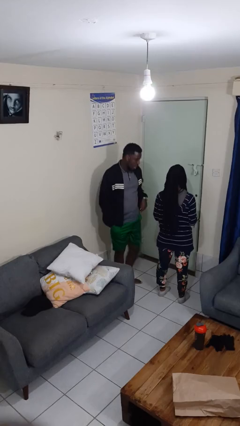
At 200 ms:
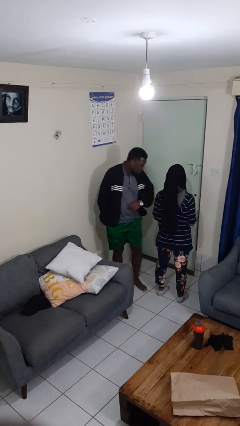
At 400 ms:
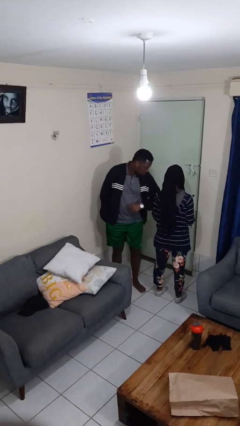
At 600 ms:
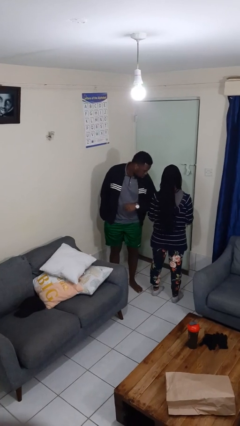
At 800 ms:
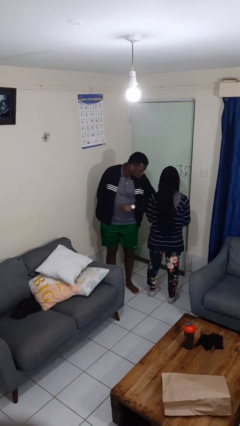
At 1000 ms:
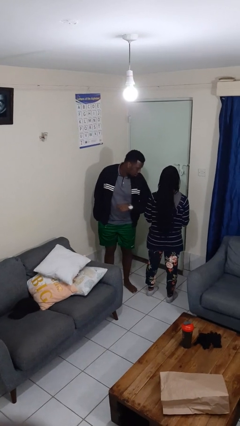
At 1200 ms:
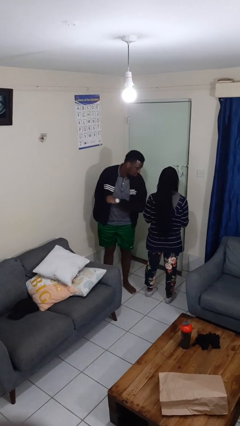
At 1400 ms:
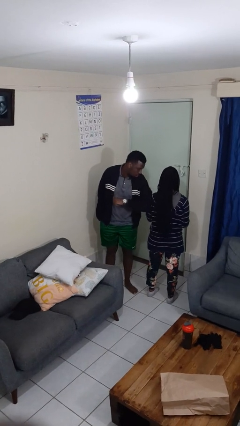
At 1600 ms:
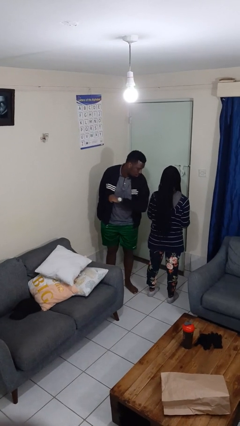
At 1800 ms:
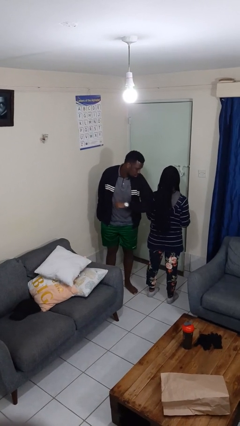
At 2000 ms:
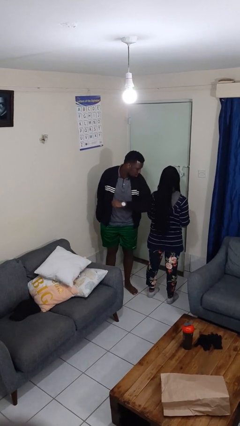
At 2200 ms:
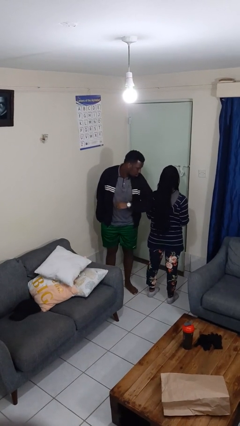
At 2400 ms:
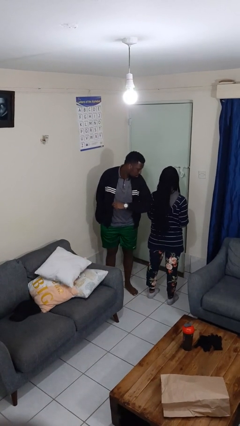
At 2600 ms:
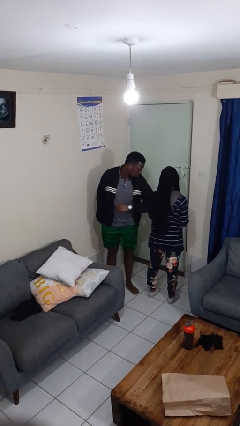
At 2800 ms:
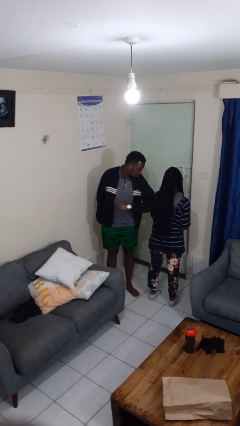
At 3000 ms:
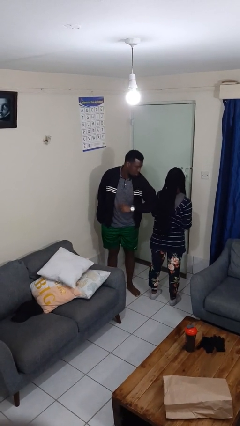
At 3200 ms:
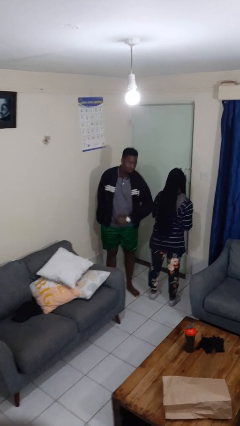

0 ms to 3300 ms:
person nudges person with elbow

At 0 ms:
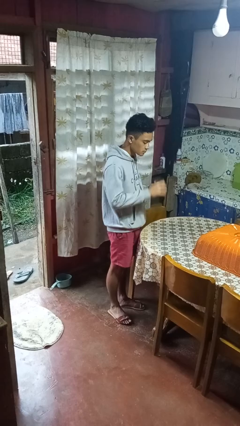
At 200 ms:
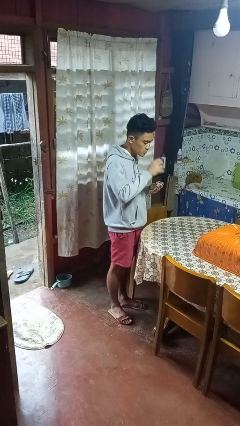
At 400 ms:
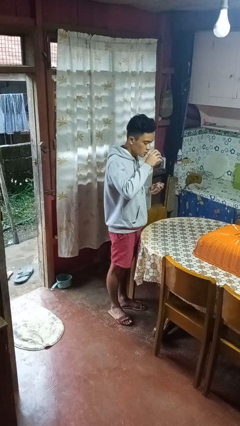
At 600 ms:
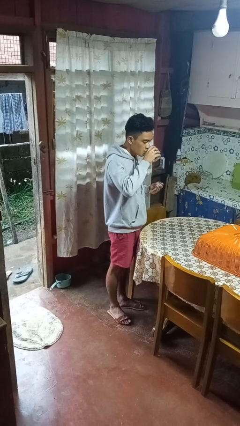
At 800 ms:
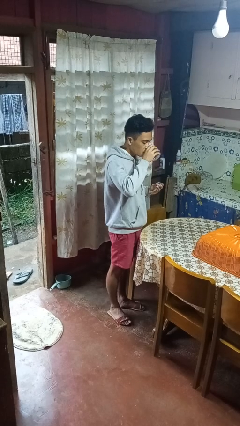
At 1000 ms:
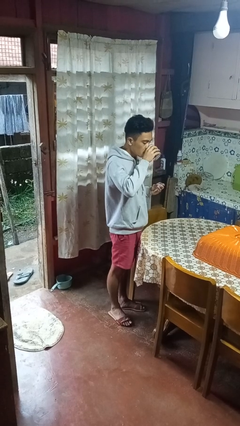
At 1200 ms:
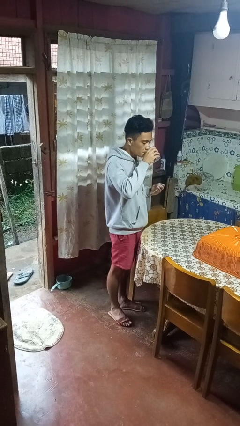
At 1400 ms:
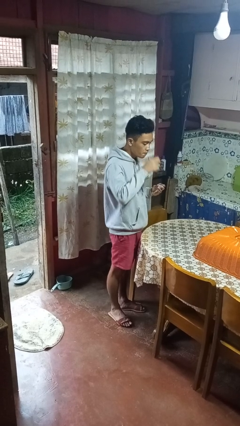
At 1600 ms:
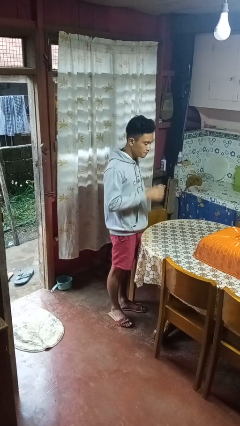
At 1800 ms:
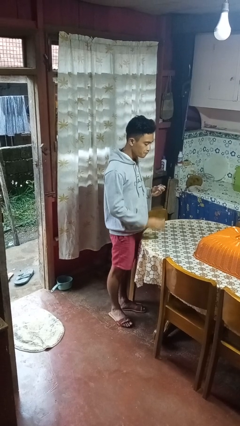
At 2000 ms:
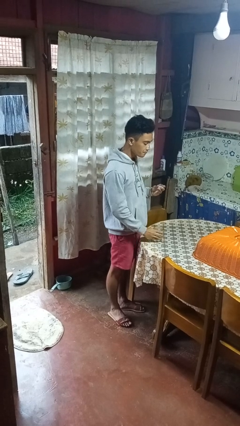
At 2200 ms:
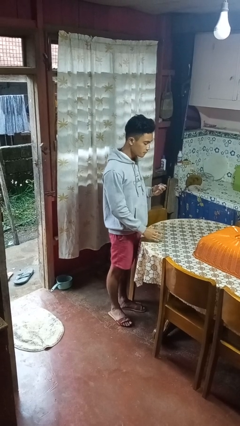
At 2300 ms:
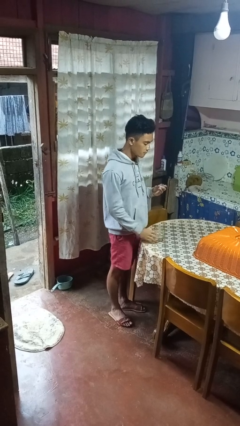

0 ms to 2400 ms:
person drinks from cup

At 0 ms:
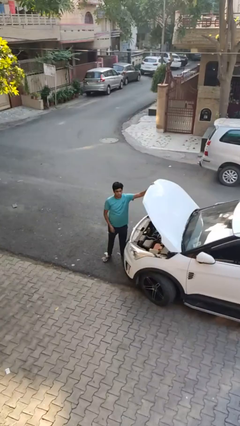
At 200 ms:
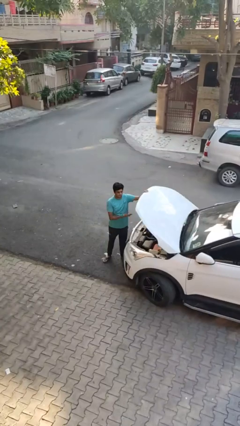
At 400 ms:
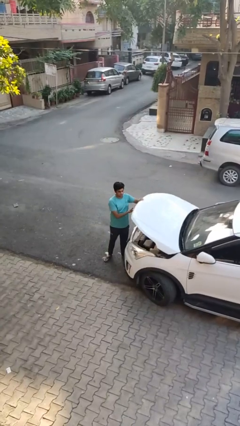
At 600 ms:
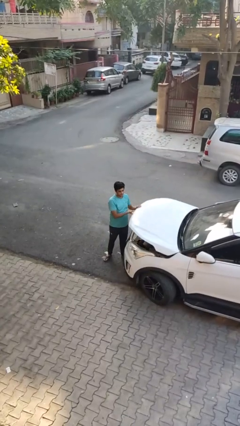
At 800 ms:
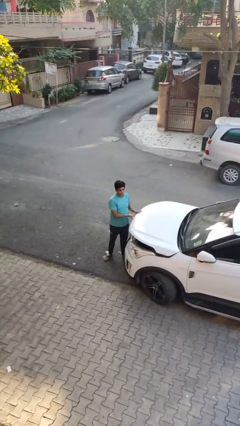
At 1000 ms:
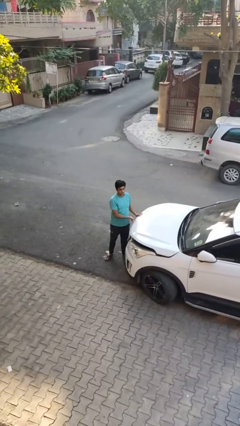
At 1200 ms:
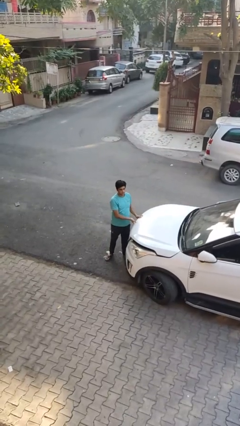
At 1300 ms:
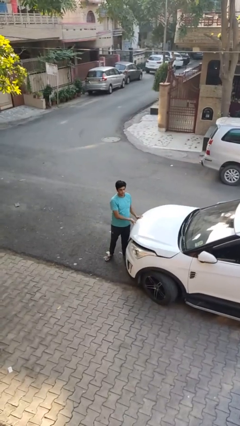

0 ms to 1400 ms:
person closes car hood

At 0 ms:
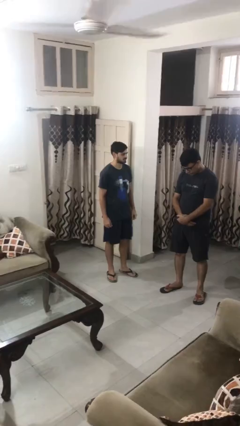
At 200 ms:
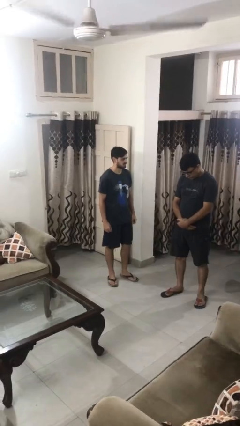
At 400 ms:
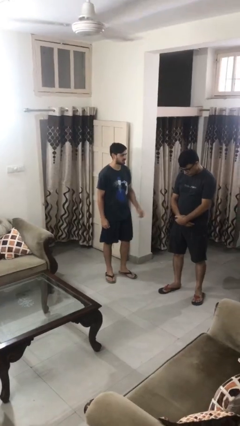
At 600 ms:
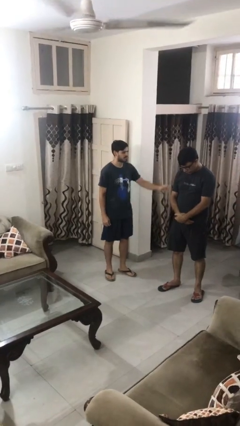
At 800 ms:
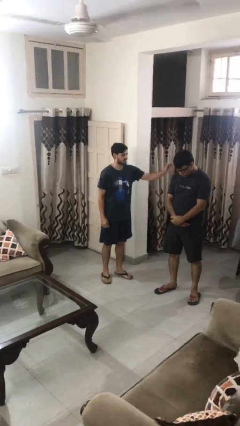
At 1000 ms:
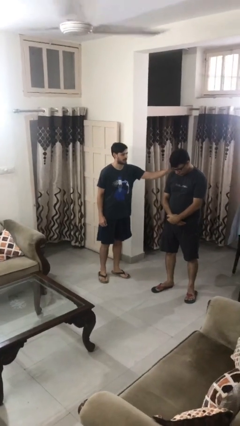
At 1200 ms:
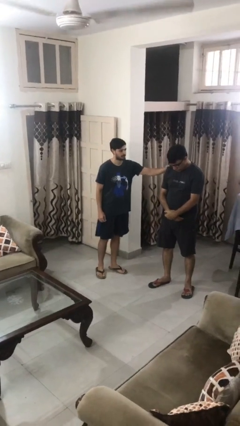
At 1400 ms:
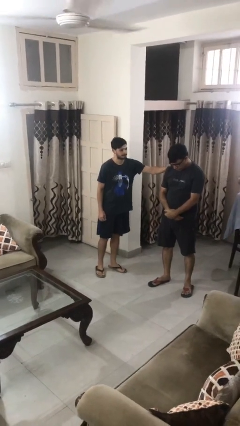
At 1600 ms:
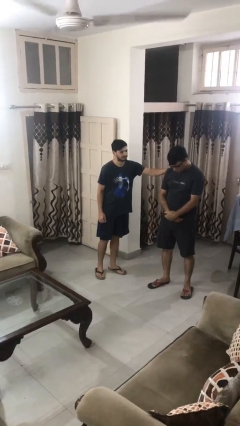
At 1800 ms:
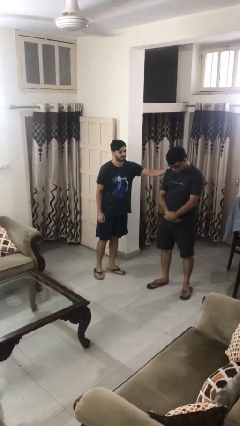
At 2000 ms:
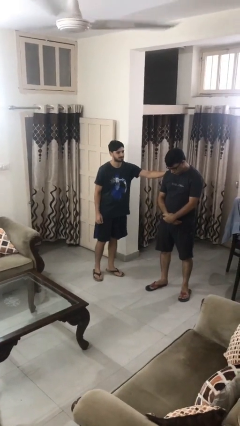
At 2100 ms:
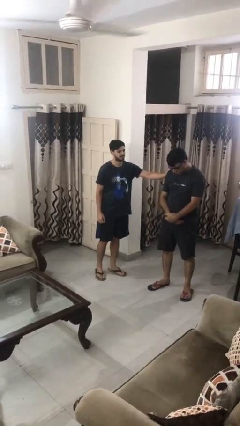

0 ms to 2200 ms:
person pounds shoulders of person

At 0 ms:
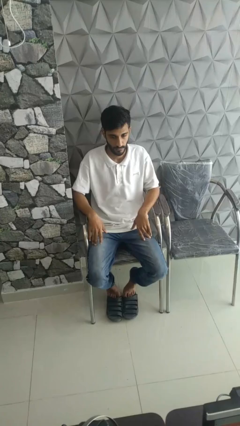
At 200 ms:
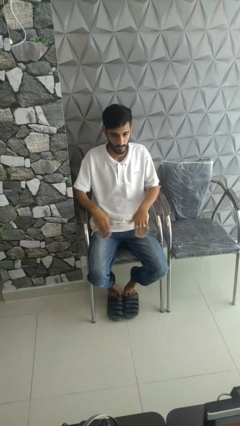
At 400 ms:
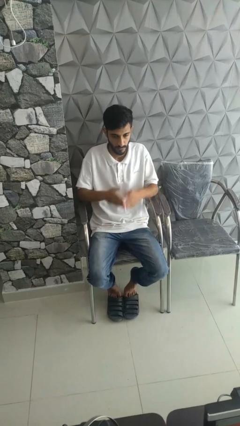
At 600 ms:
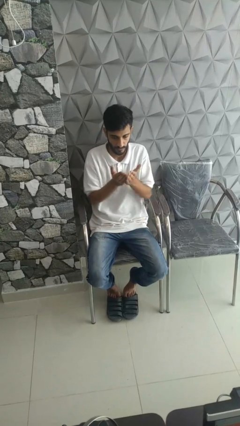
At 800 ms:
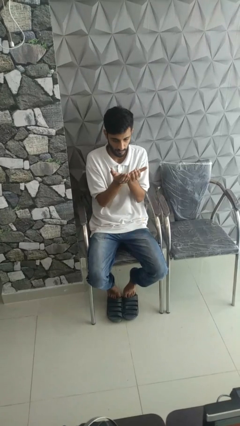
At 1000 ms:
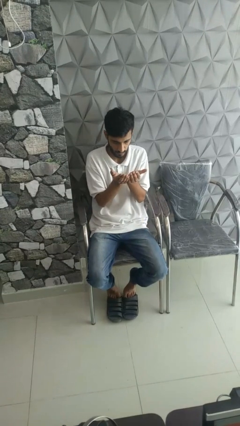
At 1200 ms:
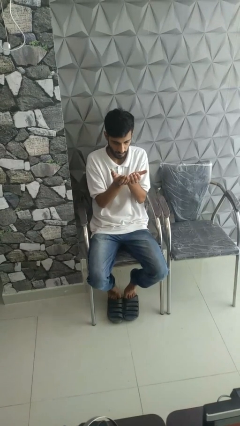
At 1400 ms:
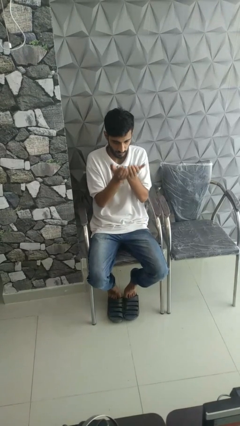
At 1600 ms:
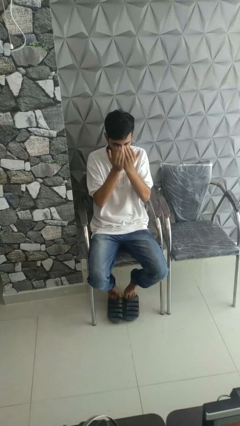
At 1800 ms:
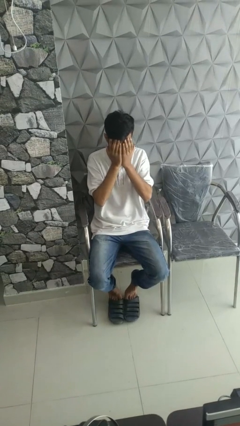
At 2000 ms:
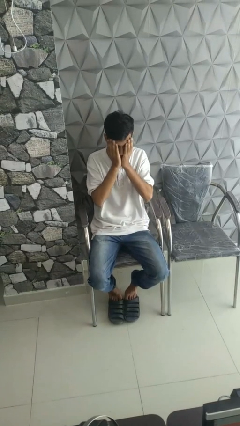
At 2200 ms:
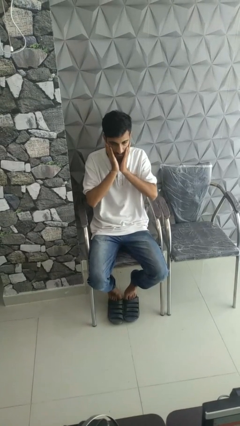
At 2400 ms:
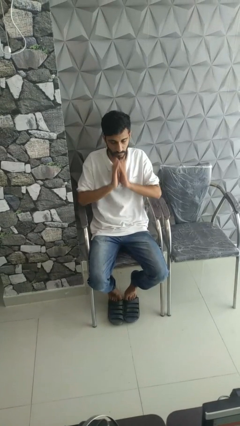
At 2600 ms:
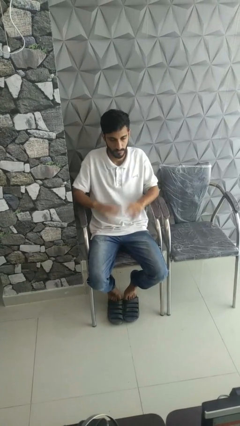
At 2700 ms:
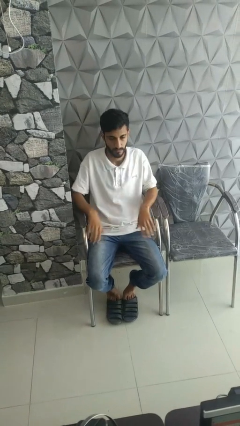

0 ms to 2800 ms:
person prays

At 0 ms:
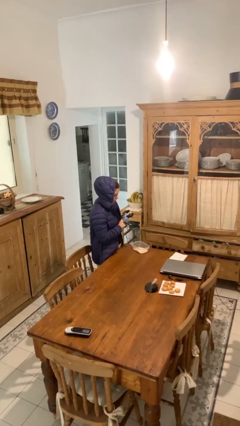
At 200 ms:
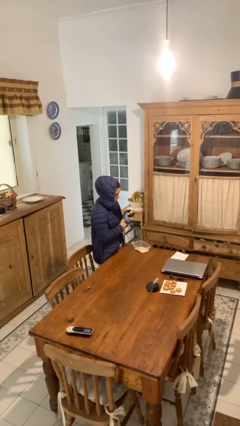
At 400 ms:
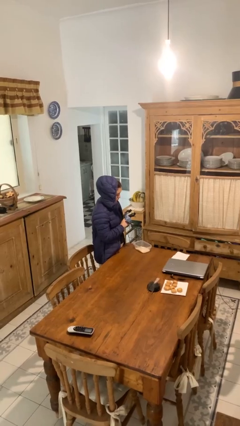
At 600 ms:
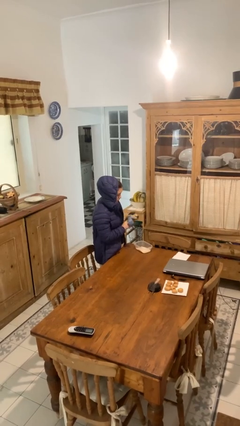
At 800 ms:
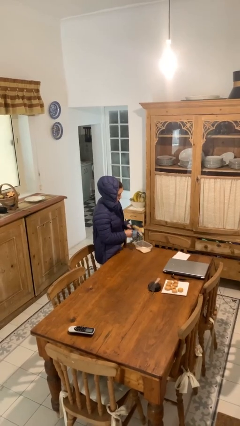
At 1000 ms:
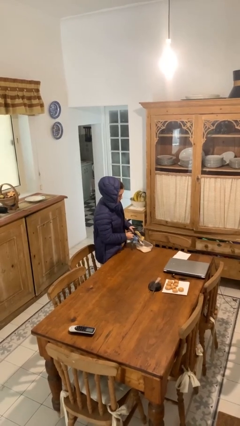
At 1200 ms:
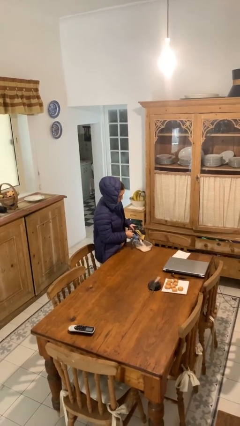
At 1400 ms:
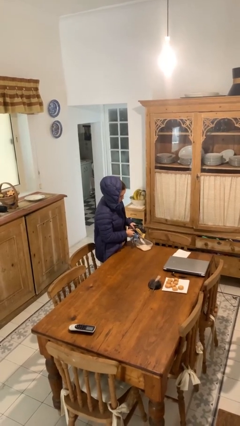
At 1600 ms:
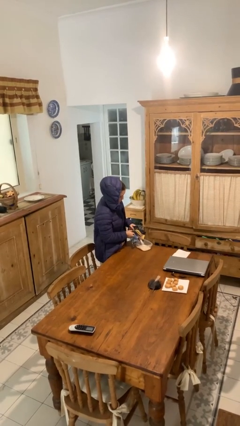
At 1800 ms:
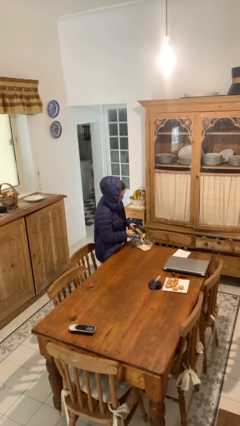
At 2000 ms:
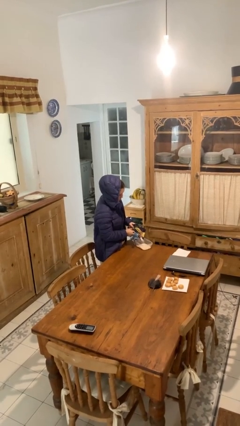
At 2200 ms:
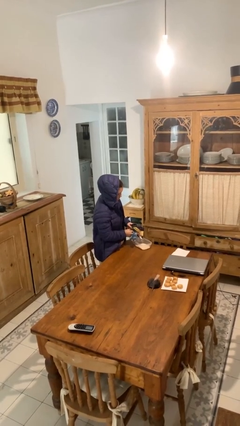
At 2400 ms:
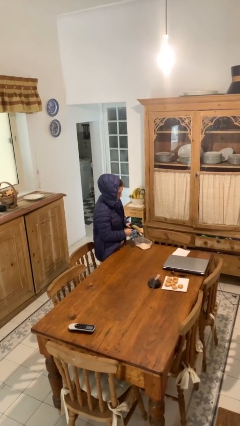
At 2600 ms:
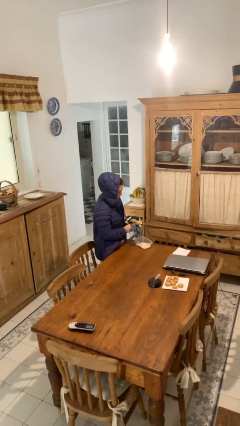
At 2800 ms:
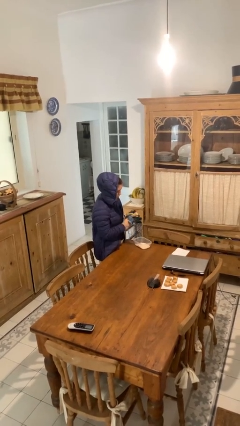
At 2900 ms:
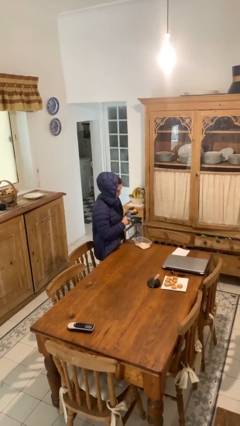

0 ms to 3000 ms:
person pours into bowl

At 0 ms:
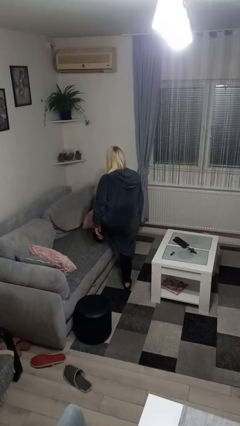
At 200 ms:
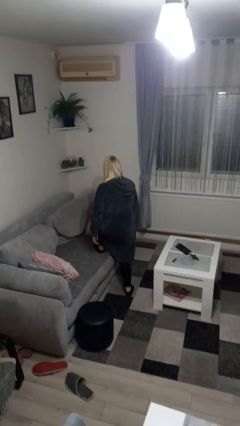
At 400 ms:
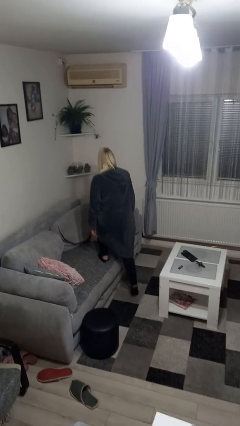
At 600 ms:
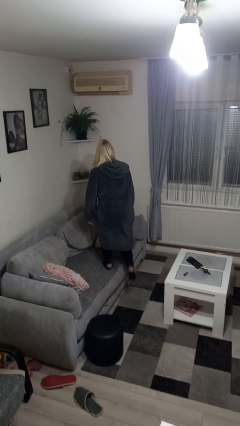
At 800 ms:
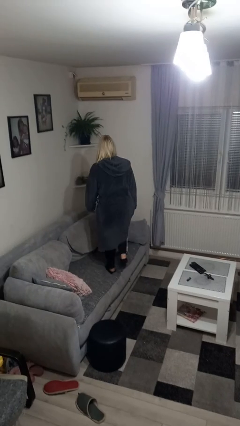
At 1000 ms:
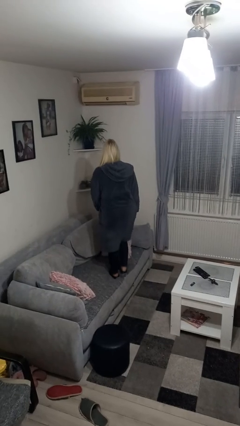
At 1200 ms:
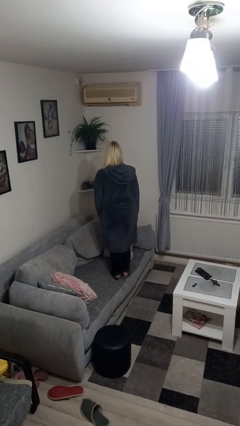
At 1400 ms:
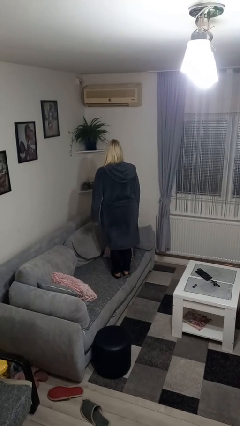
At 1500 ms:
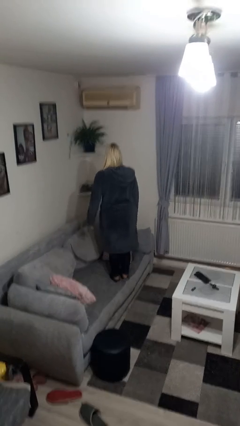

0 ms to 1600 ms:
person climbs on couch

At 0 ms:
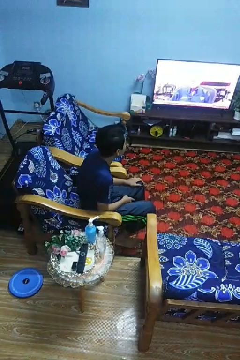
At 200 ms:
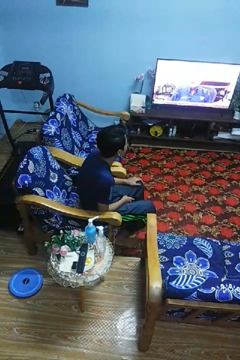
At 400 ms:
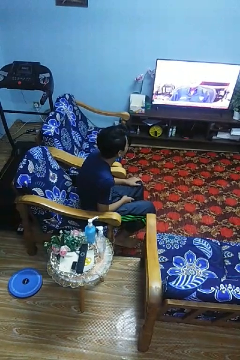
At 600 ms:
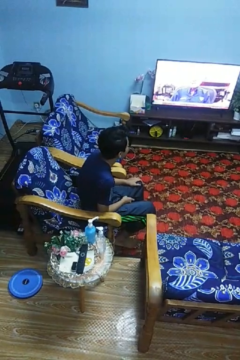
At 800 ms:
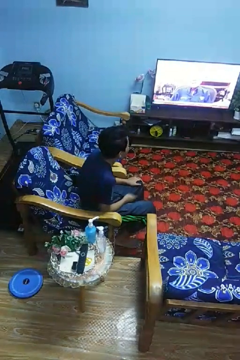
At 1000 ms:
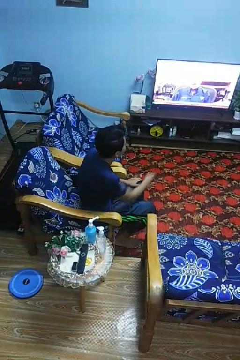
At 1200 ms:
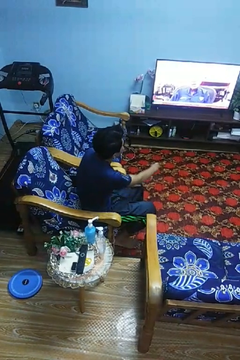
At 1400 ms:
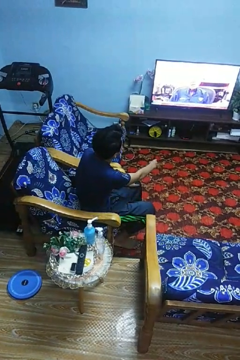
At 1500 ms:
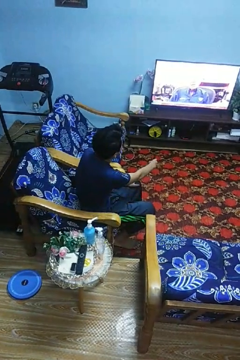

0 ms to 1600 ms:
person uses television remote
